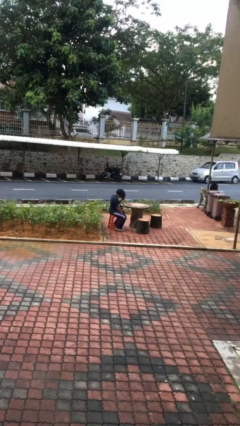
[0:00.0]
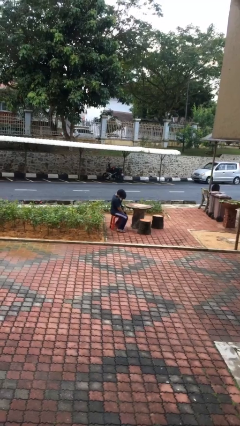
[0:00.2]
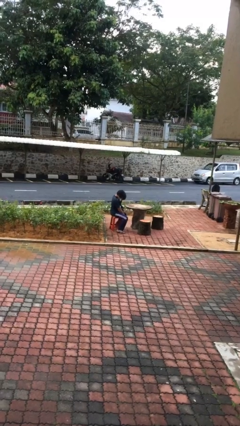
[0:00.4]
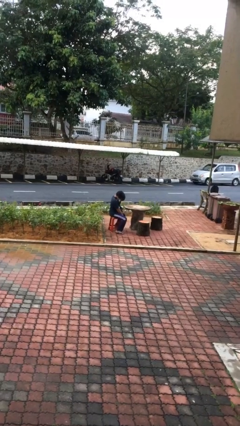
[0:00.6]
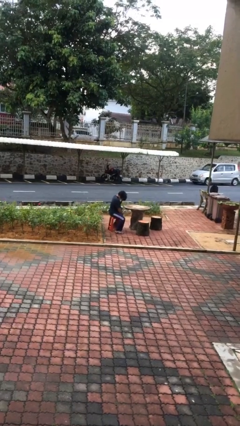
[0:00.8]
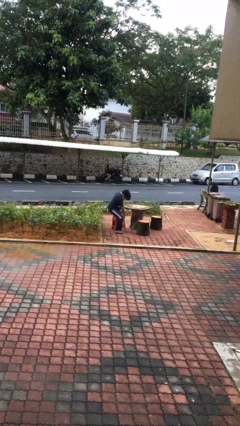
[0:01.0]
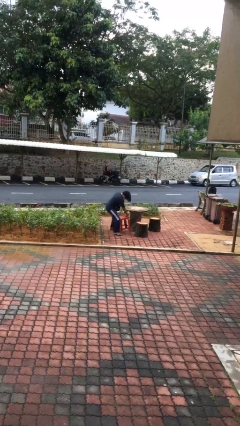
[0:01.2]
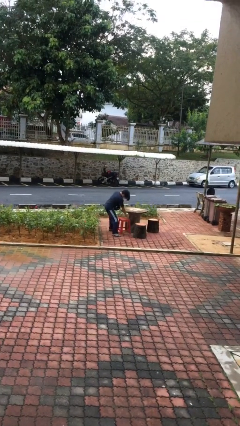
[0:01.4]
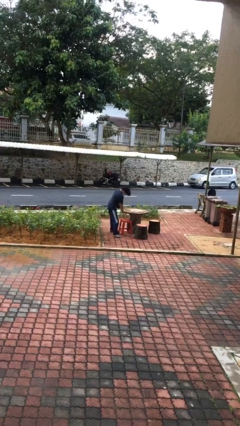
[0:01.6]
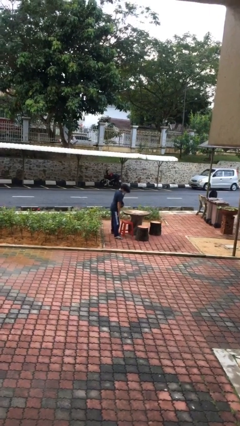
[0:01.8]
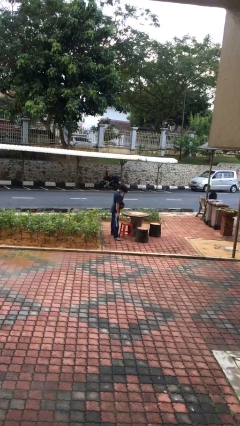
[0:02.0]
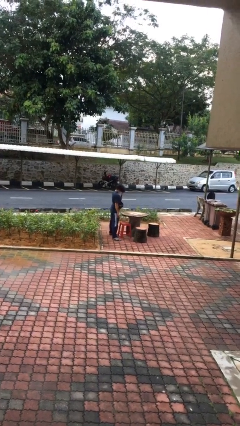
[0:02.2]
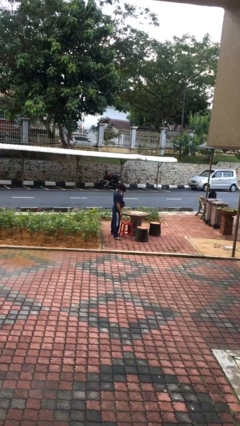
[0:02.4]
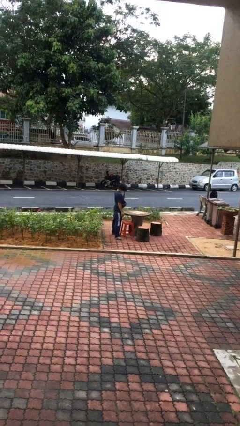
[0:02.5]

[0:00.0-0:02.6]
person stands up

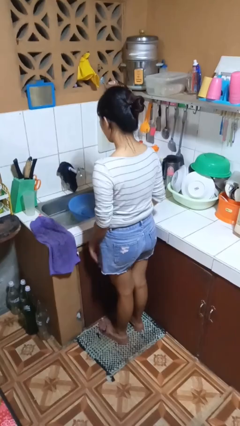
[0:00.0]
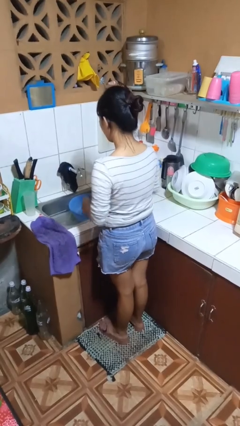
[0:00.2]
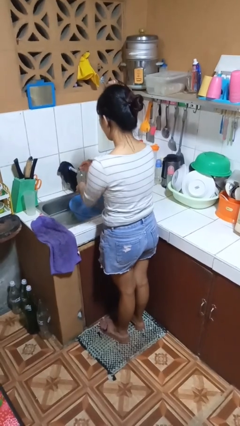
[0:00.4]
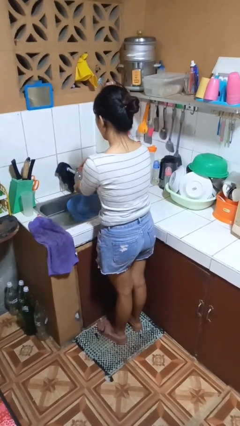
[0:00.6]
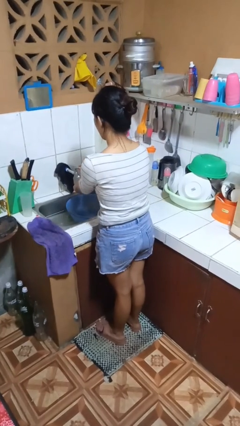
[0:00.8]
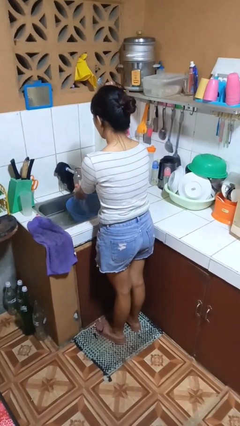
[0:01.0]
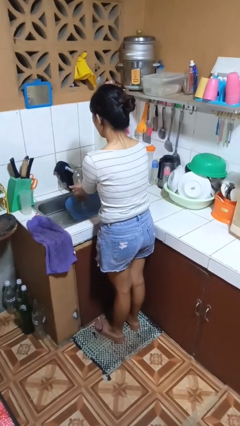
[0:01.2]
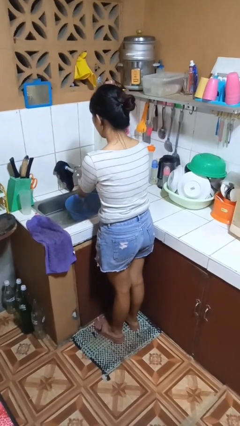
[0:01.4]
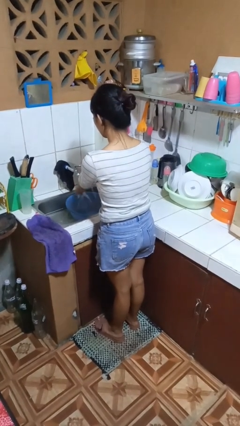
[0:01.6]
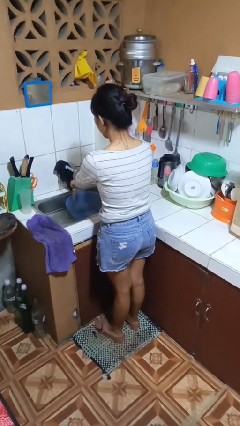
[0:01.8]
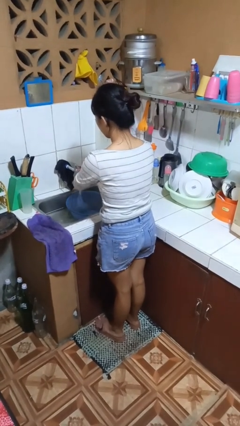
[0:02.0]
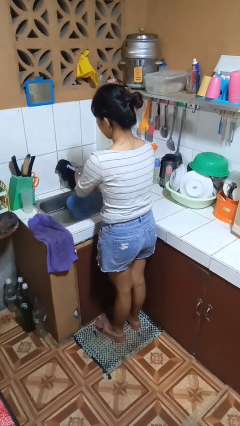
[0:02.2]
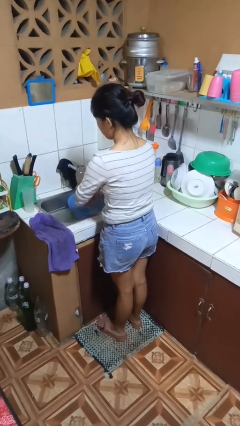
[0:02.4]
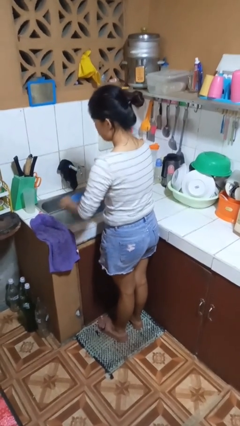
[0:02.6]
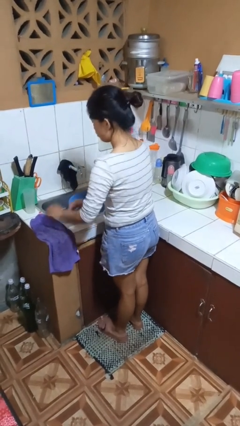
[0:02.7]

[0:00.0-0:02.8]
person washes hands

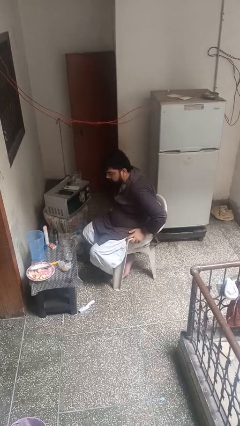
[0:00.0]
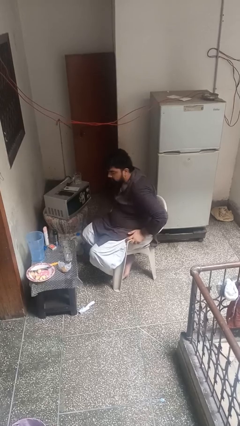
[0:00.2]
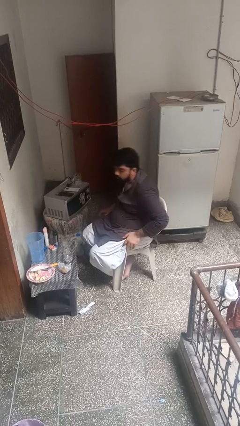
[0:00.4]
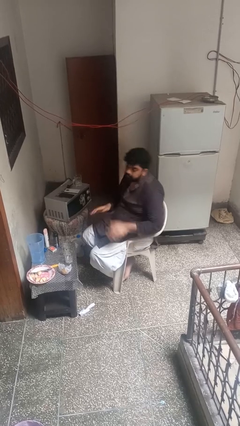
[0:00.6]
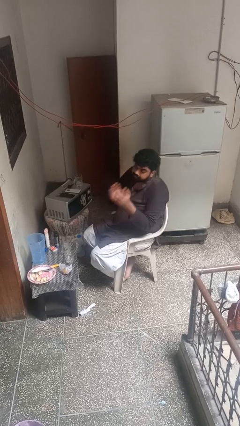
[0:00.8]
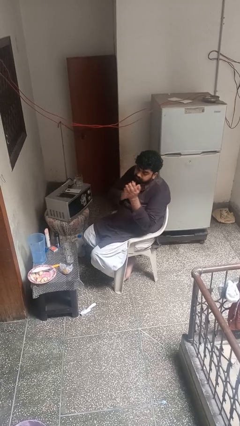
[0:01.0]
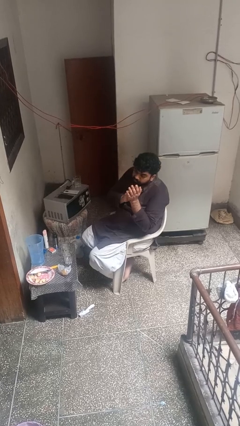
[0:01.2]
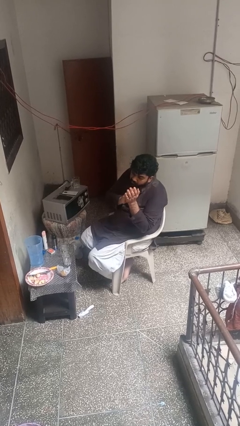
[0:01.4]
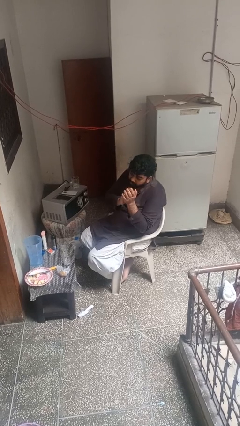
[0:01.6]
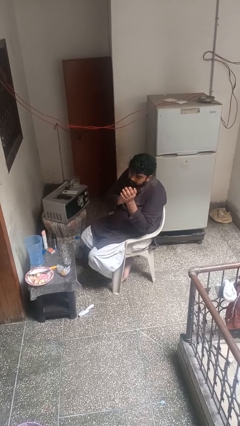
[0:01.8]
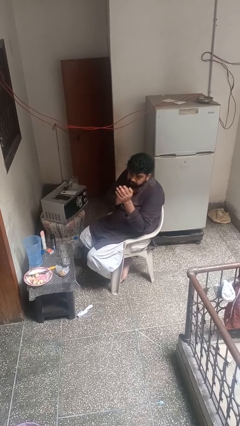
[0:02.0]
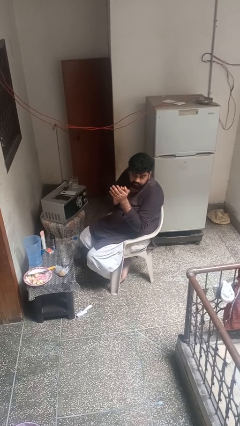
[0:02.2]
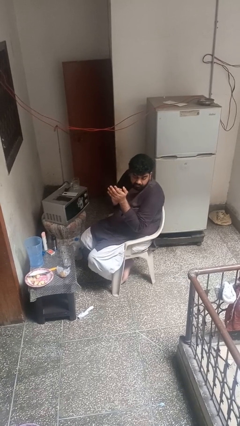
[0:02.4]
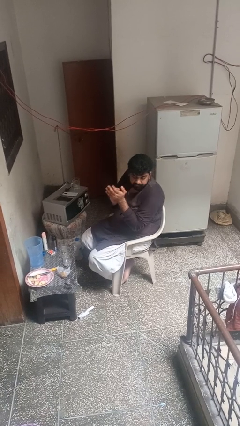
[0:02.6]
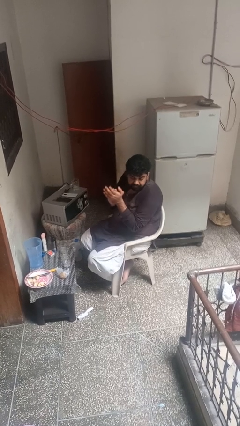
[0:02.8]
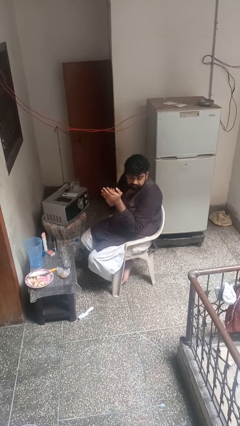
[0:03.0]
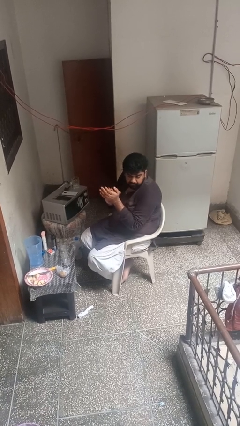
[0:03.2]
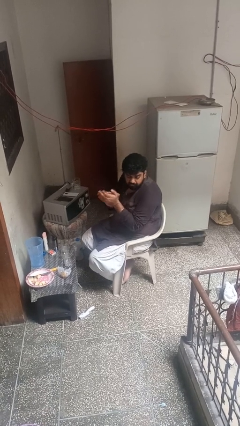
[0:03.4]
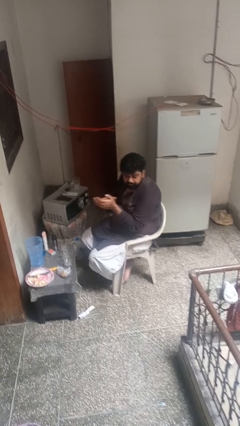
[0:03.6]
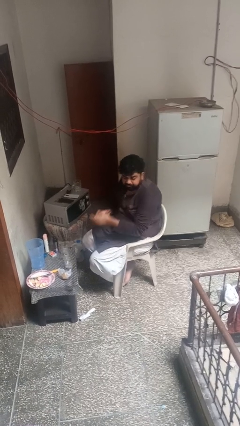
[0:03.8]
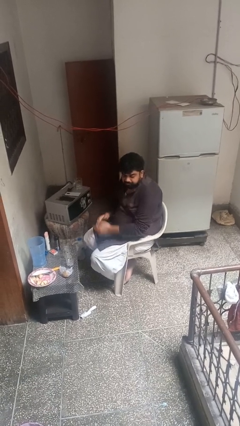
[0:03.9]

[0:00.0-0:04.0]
person claps hands

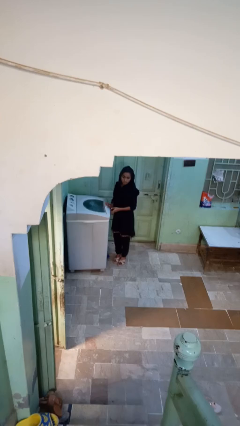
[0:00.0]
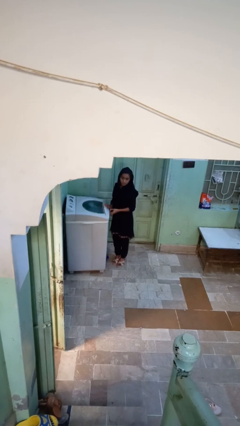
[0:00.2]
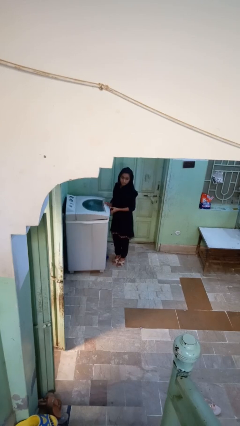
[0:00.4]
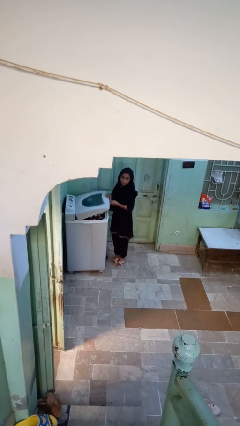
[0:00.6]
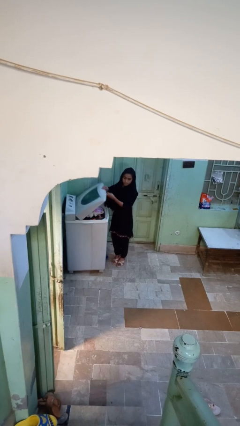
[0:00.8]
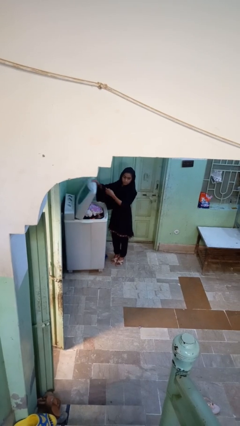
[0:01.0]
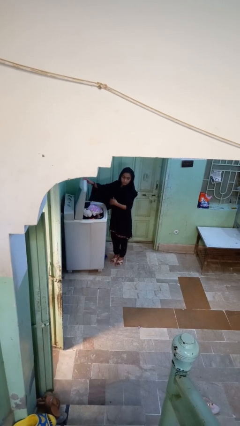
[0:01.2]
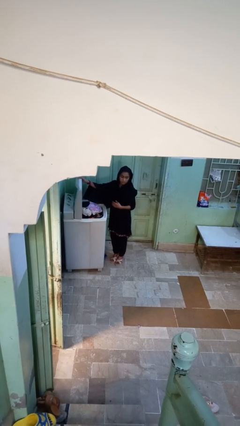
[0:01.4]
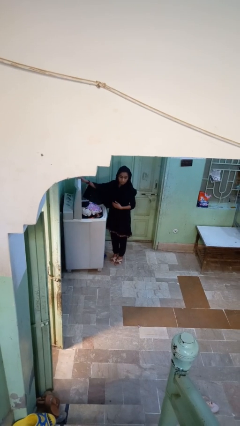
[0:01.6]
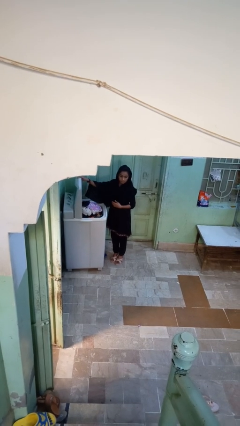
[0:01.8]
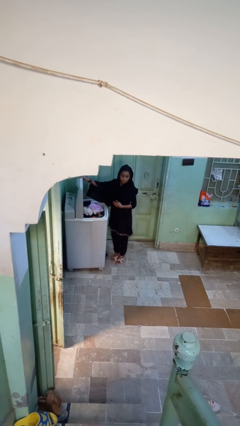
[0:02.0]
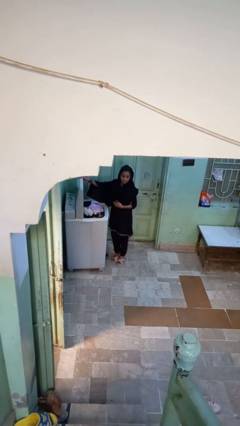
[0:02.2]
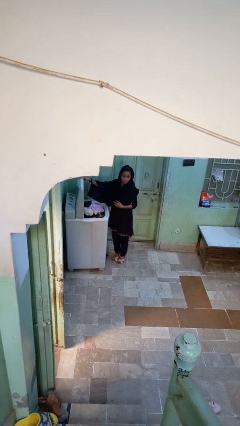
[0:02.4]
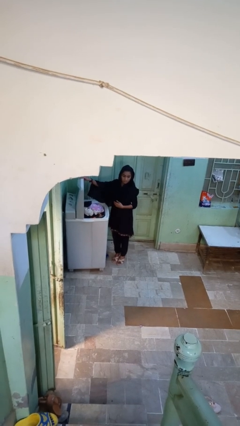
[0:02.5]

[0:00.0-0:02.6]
person opens clothes washer

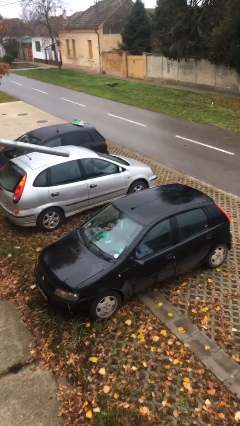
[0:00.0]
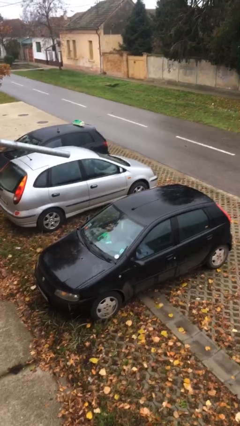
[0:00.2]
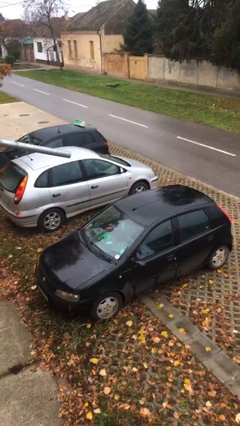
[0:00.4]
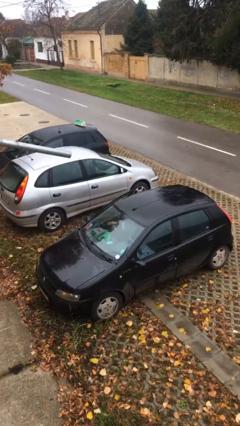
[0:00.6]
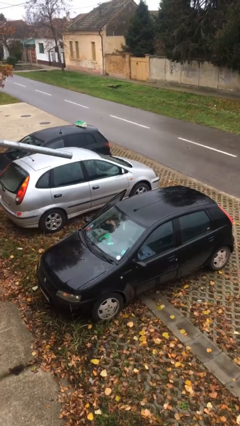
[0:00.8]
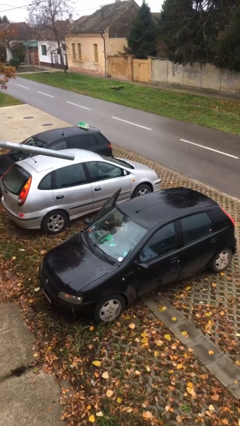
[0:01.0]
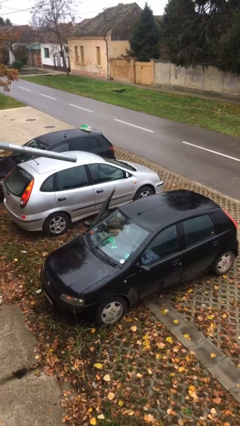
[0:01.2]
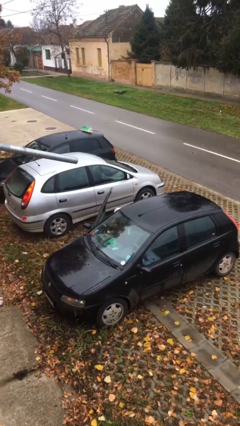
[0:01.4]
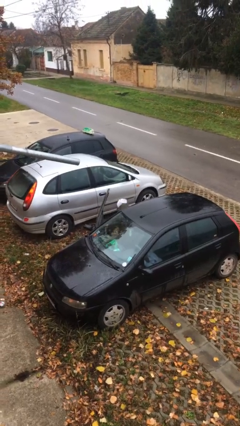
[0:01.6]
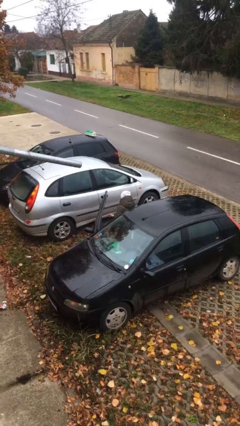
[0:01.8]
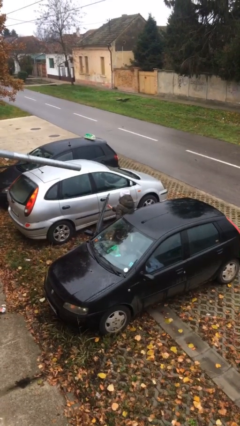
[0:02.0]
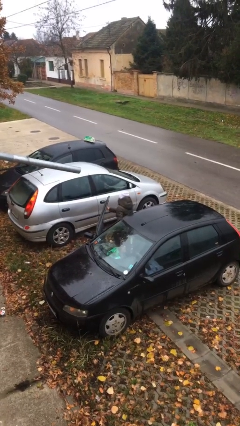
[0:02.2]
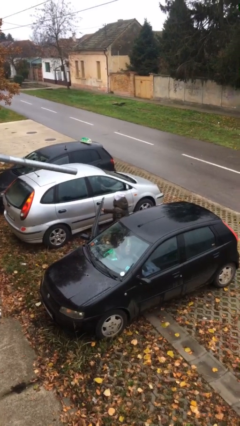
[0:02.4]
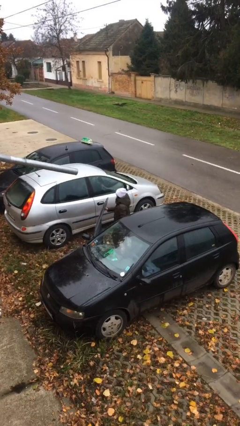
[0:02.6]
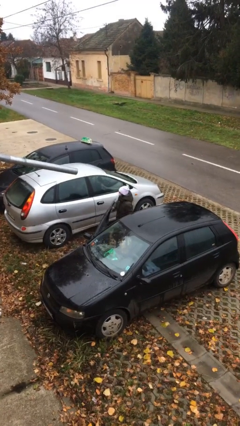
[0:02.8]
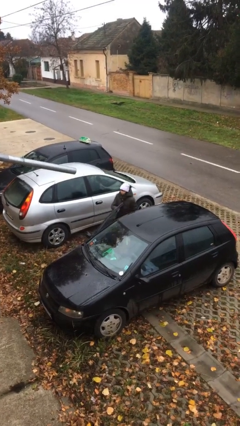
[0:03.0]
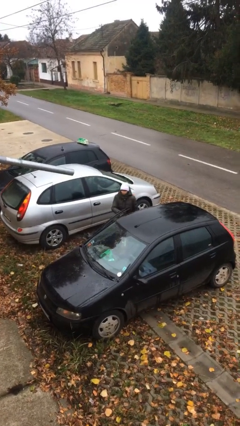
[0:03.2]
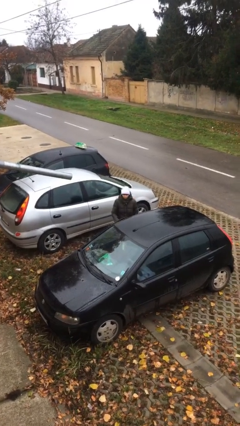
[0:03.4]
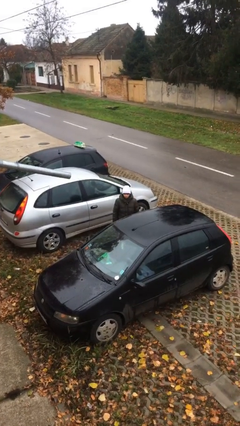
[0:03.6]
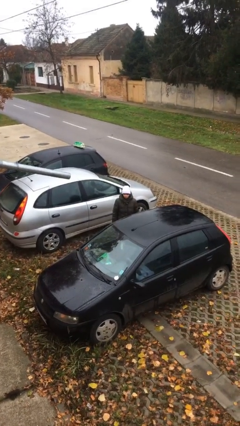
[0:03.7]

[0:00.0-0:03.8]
person exits car

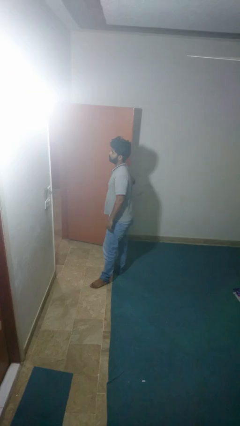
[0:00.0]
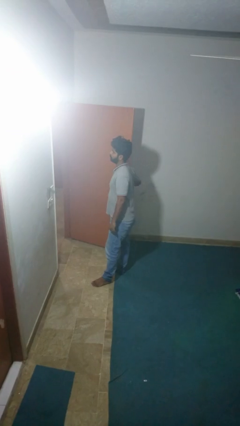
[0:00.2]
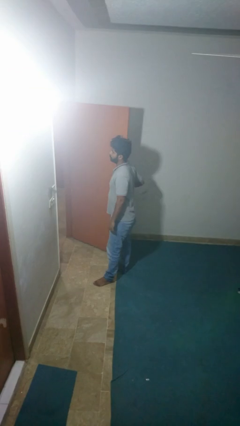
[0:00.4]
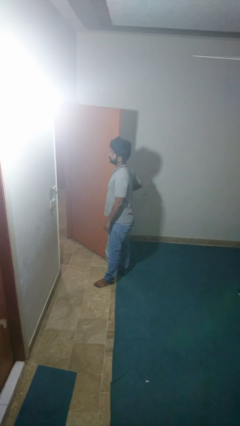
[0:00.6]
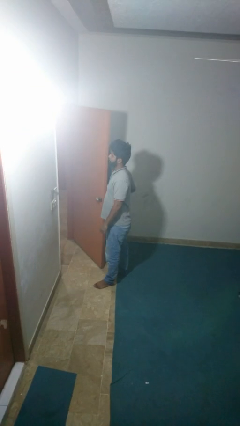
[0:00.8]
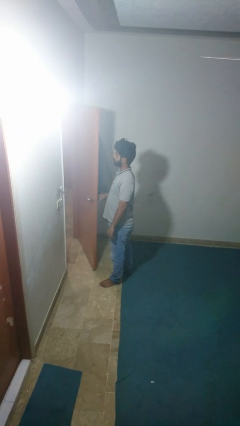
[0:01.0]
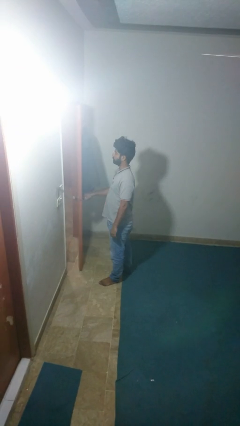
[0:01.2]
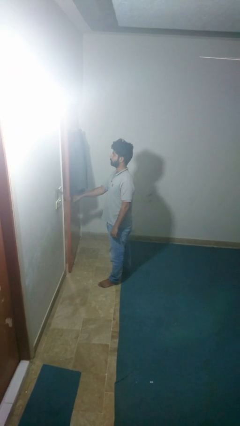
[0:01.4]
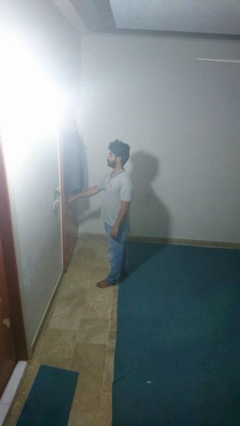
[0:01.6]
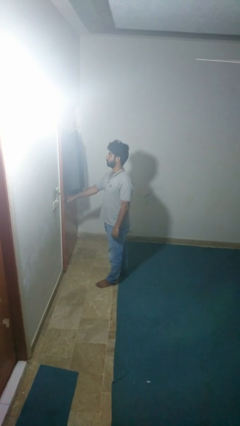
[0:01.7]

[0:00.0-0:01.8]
person closes facility door
